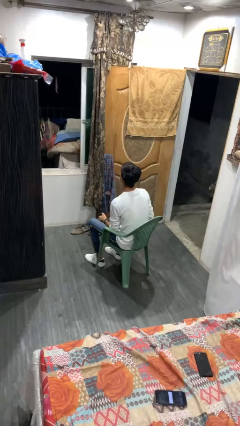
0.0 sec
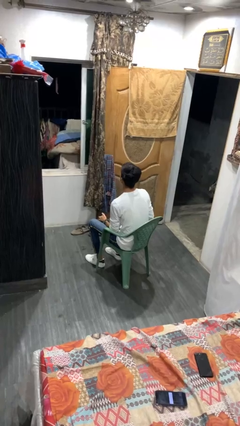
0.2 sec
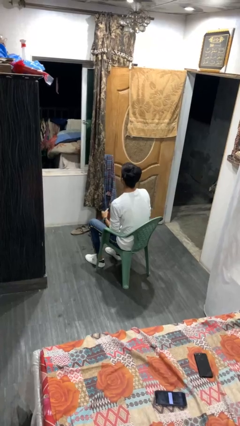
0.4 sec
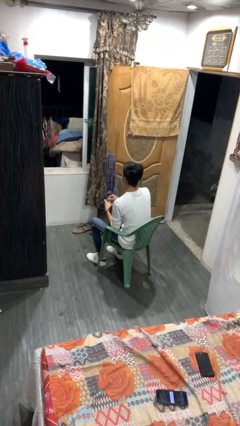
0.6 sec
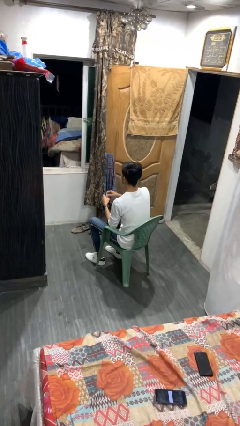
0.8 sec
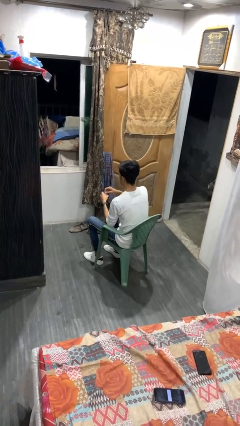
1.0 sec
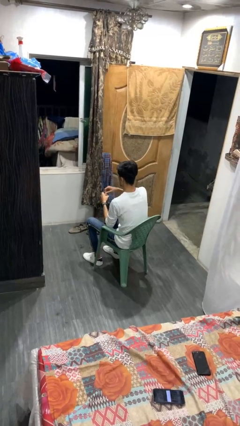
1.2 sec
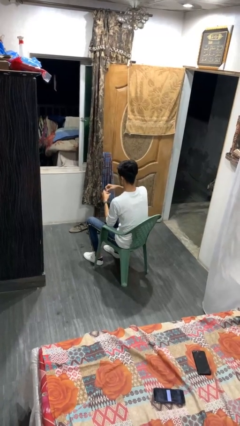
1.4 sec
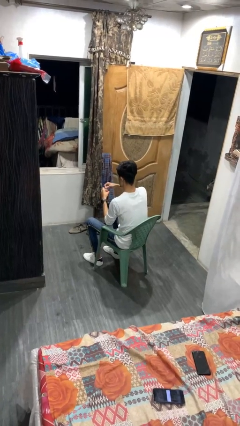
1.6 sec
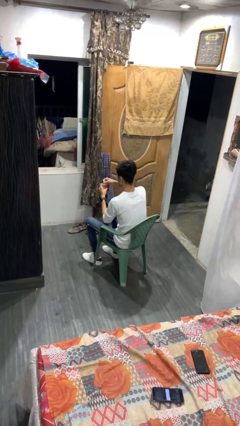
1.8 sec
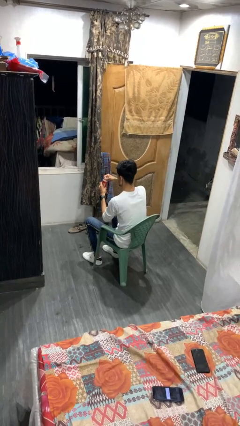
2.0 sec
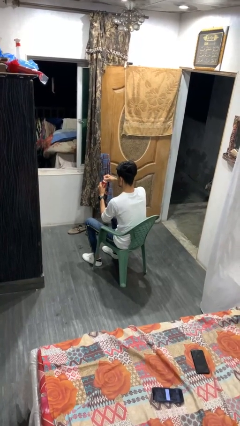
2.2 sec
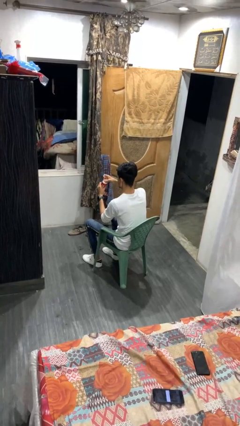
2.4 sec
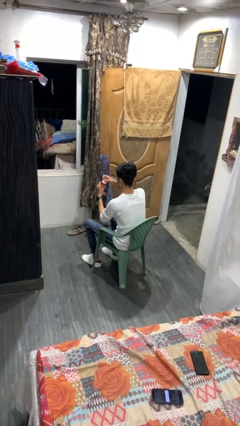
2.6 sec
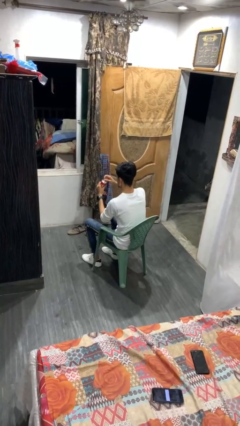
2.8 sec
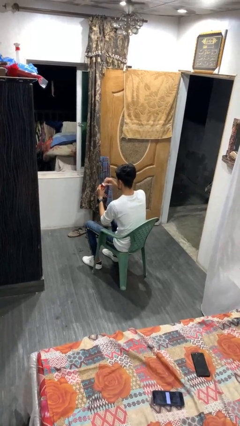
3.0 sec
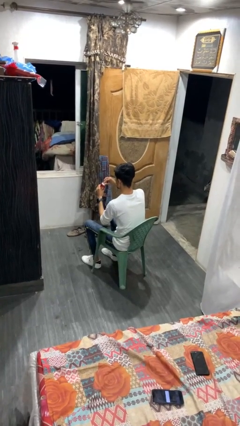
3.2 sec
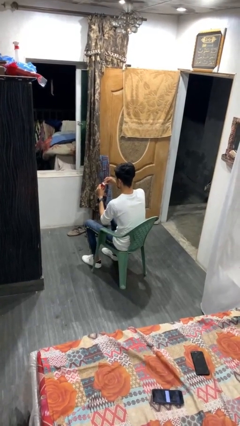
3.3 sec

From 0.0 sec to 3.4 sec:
person opens beverage can

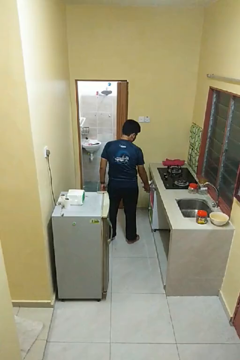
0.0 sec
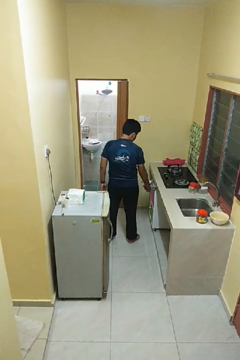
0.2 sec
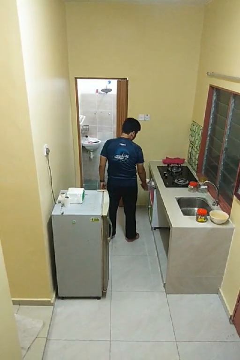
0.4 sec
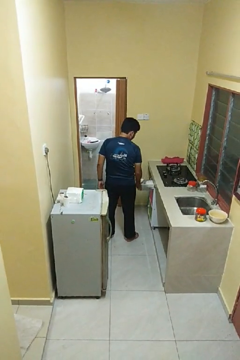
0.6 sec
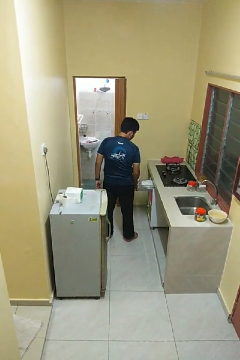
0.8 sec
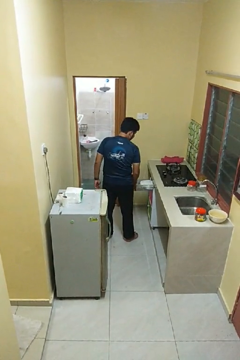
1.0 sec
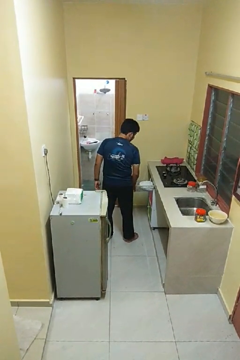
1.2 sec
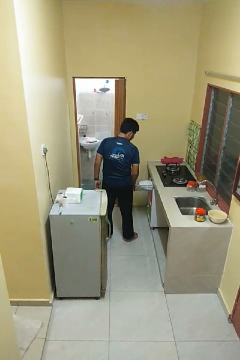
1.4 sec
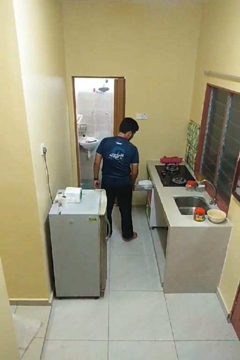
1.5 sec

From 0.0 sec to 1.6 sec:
person opens kitchen drawer

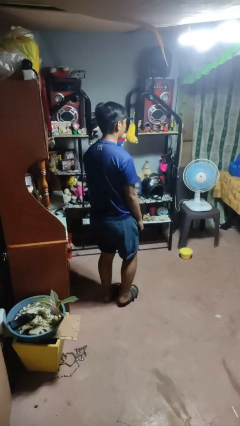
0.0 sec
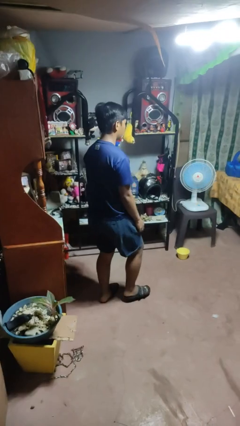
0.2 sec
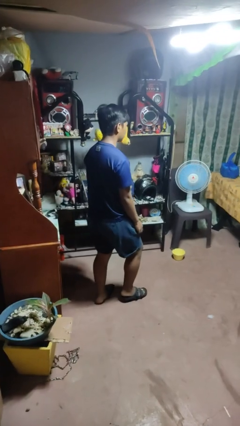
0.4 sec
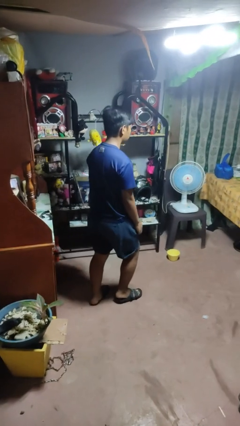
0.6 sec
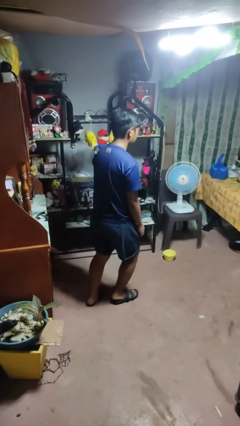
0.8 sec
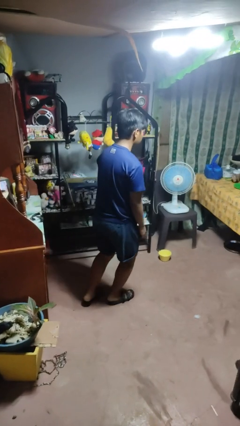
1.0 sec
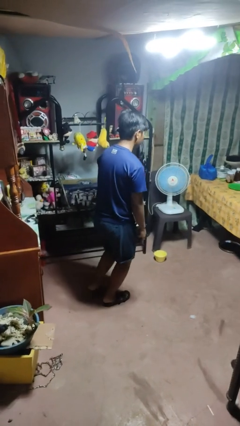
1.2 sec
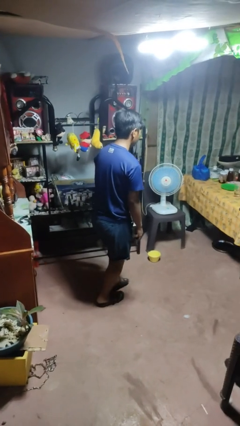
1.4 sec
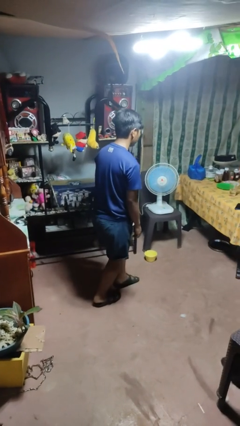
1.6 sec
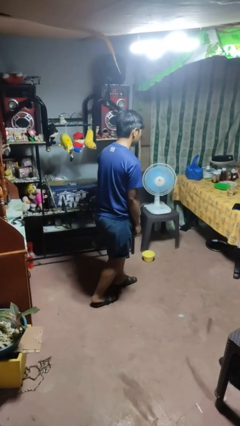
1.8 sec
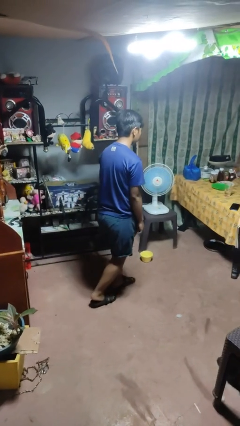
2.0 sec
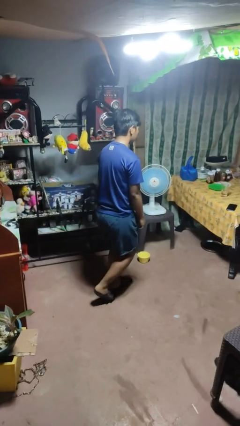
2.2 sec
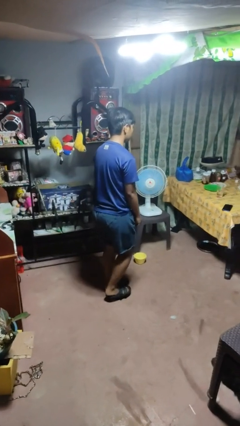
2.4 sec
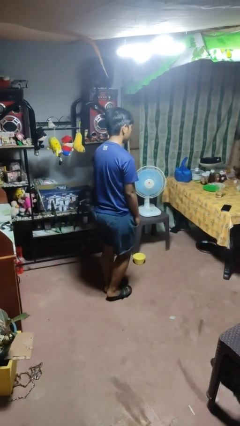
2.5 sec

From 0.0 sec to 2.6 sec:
person walks tiptoe

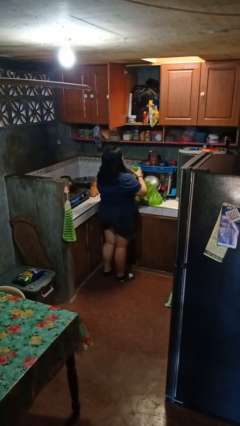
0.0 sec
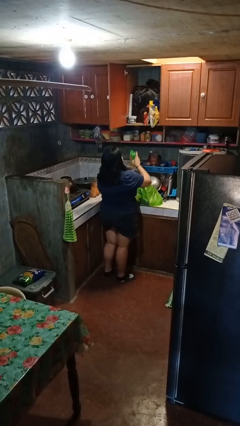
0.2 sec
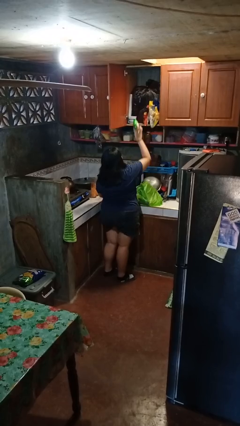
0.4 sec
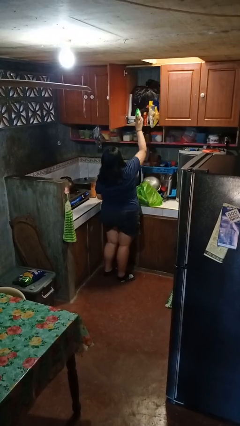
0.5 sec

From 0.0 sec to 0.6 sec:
person loads groceries into cabinet

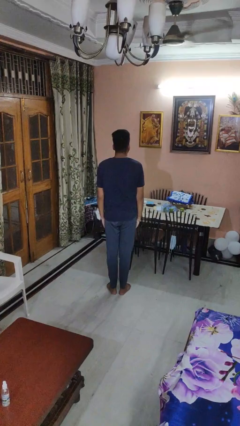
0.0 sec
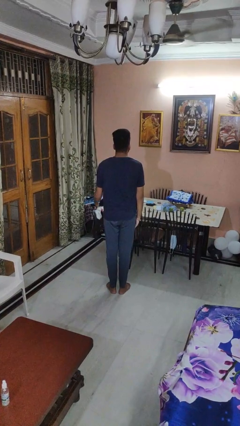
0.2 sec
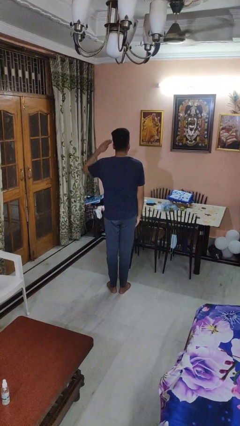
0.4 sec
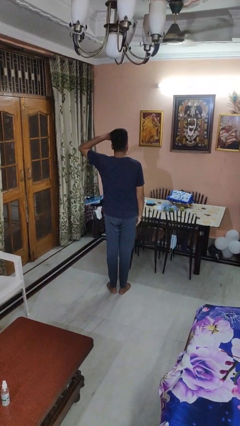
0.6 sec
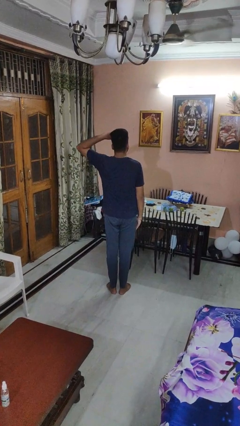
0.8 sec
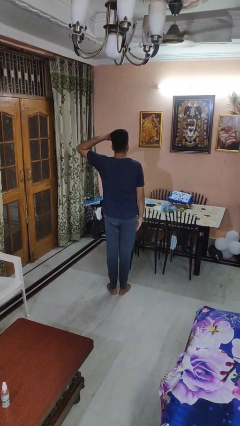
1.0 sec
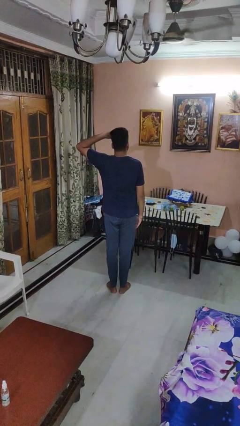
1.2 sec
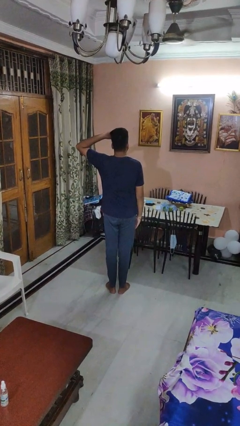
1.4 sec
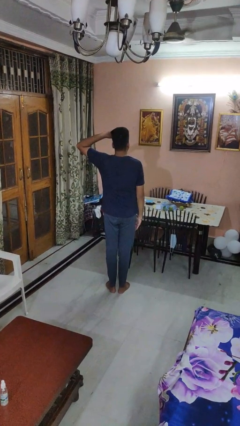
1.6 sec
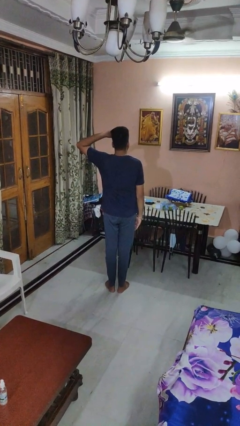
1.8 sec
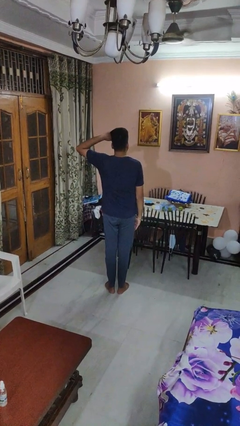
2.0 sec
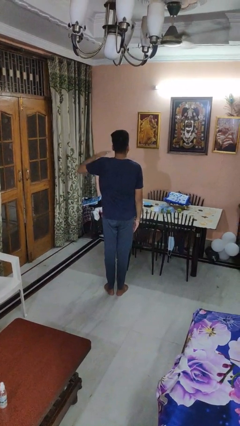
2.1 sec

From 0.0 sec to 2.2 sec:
person salutes

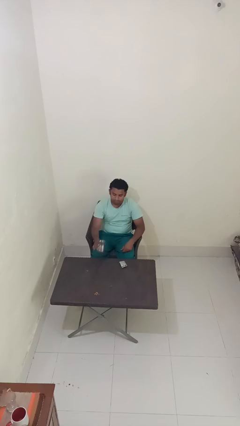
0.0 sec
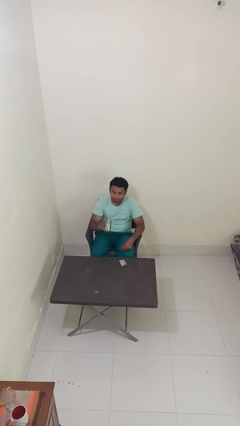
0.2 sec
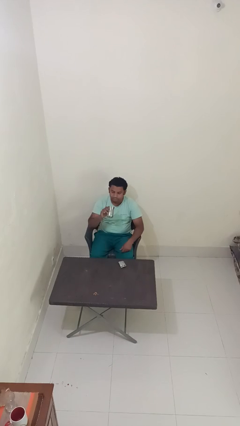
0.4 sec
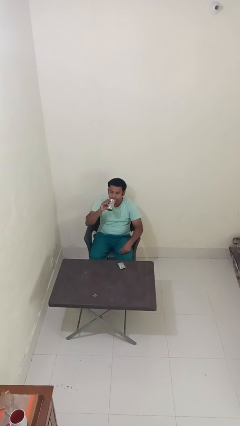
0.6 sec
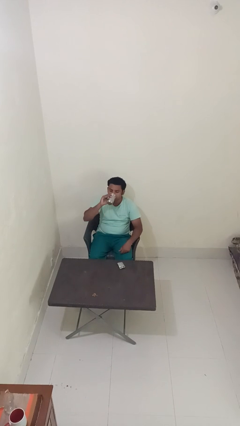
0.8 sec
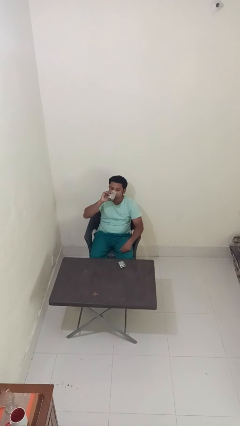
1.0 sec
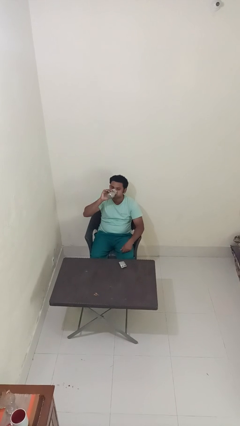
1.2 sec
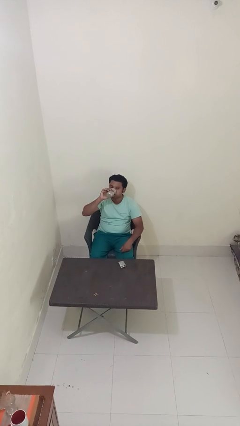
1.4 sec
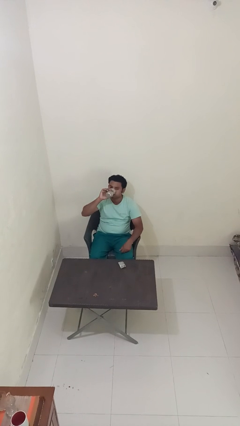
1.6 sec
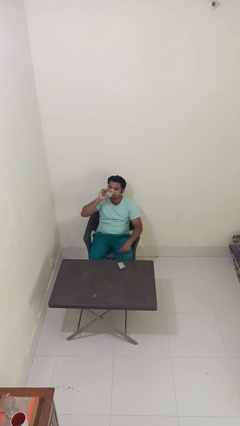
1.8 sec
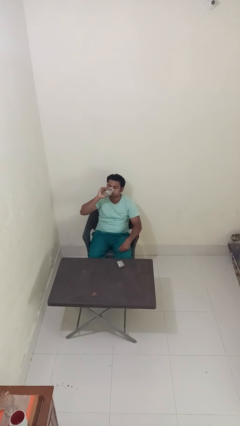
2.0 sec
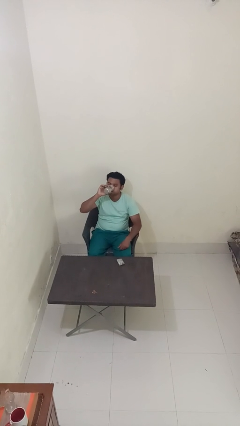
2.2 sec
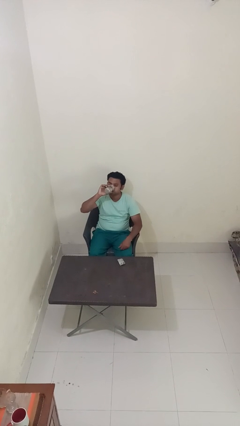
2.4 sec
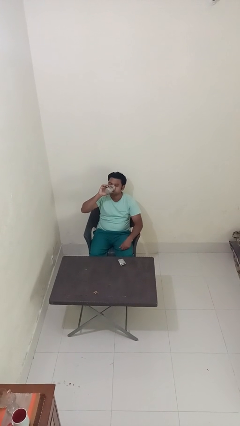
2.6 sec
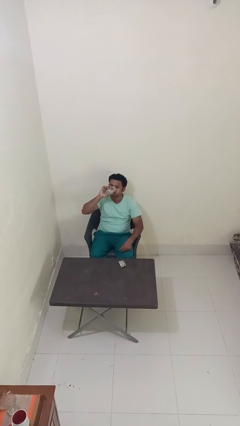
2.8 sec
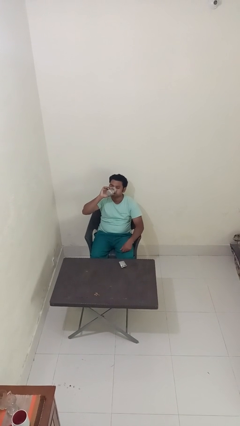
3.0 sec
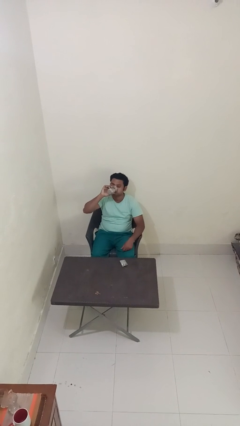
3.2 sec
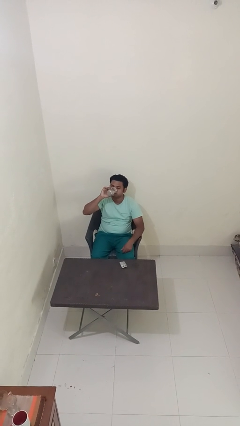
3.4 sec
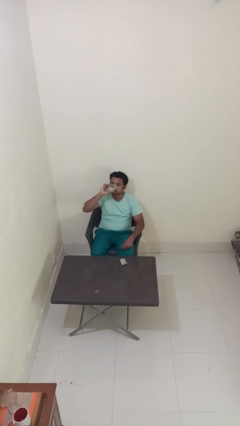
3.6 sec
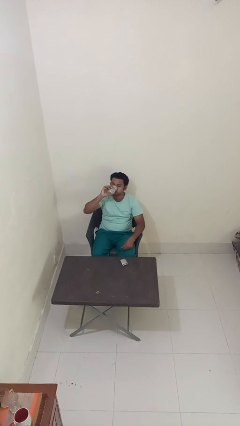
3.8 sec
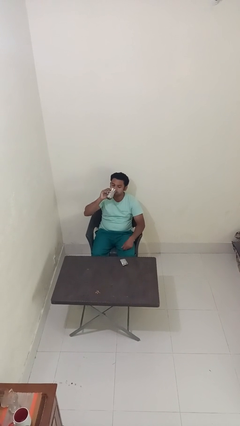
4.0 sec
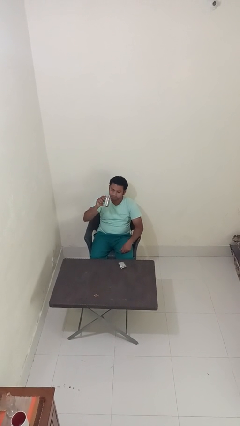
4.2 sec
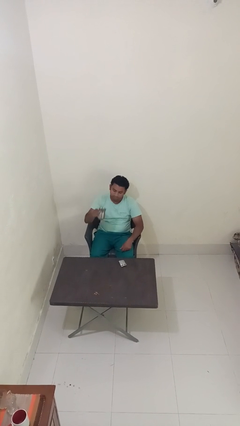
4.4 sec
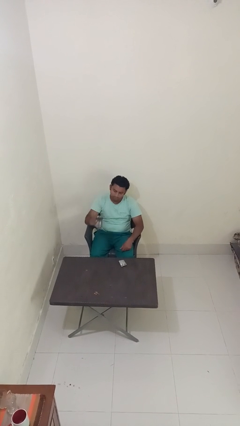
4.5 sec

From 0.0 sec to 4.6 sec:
person drinks from cup

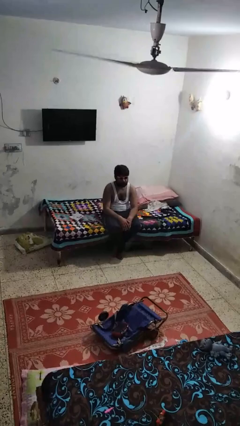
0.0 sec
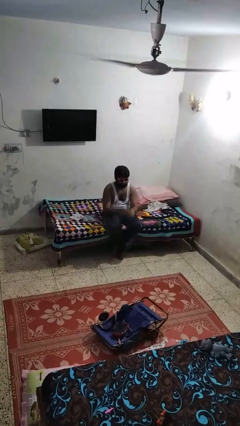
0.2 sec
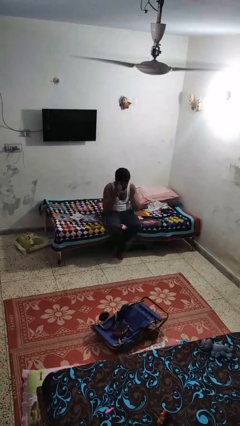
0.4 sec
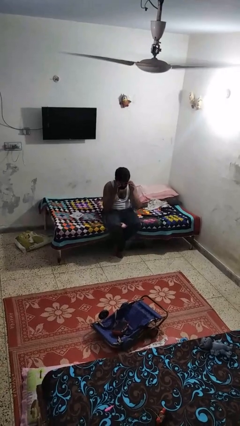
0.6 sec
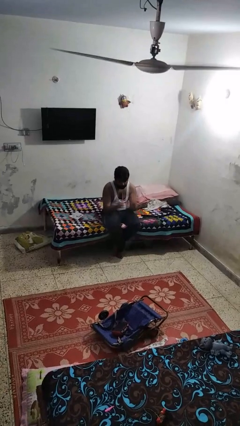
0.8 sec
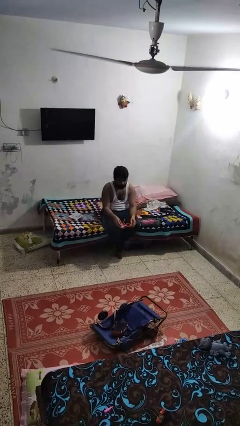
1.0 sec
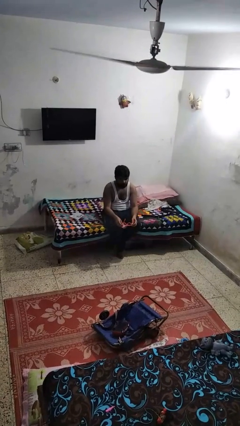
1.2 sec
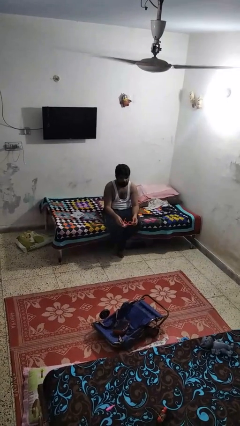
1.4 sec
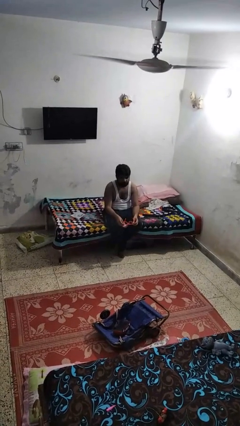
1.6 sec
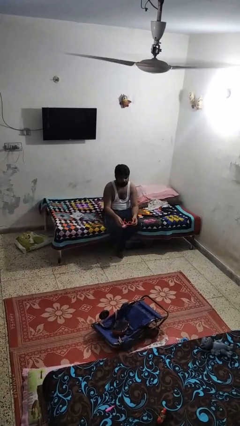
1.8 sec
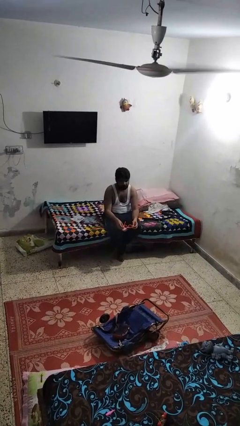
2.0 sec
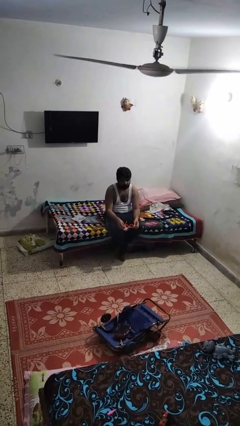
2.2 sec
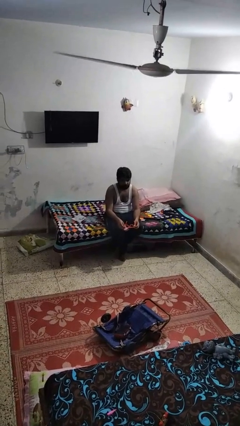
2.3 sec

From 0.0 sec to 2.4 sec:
person takes off sunglasses
